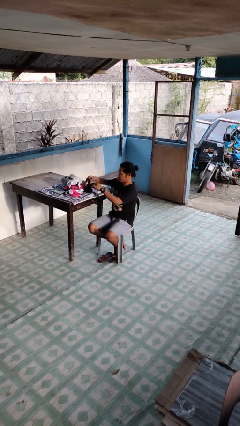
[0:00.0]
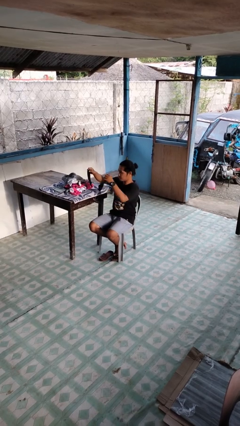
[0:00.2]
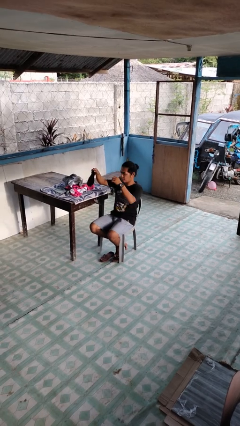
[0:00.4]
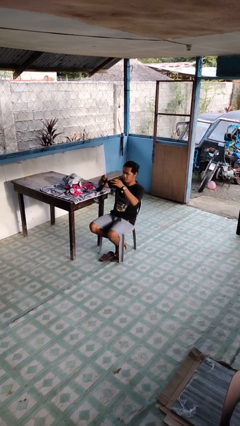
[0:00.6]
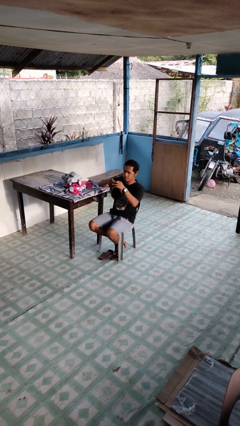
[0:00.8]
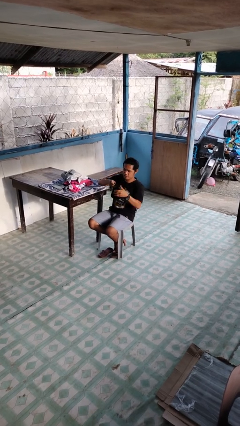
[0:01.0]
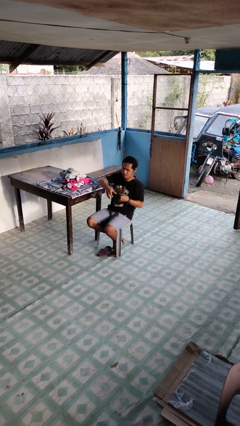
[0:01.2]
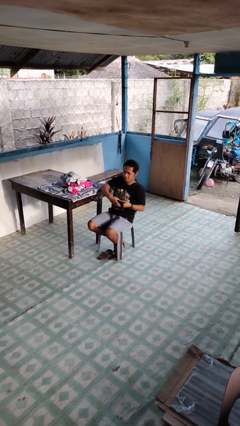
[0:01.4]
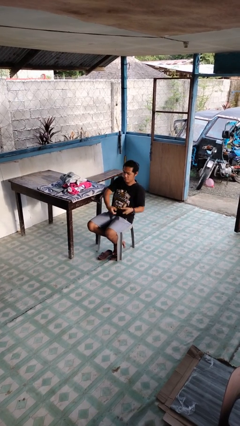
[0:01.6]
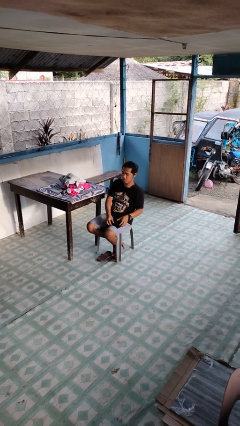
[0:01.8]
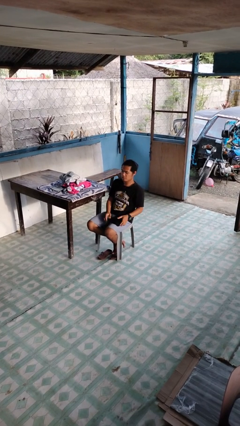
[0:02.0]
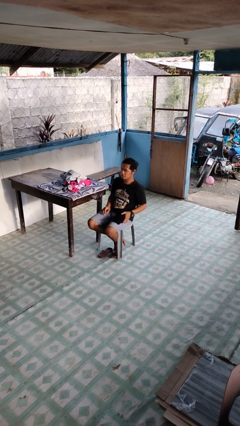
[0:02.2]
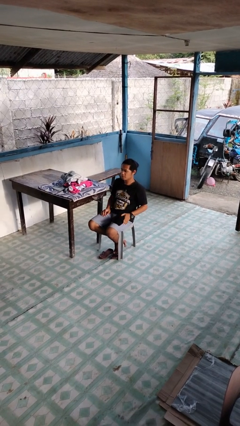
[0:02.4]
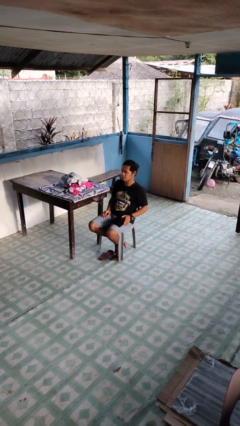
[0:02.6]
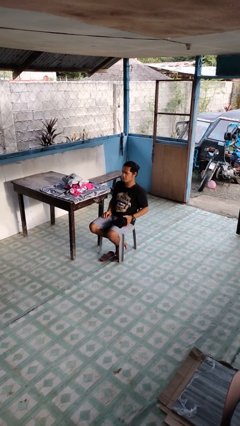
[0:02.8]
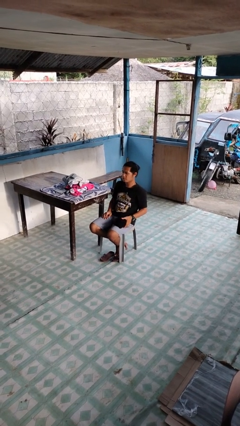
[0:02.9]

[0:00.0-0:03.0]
person folds socks

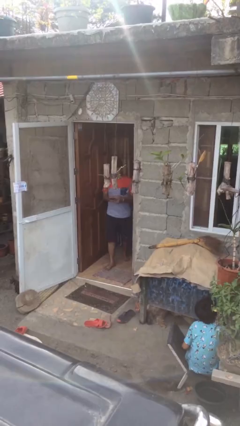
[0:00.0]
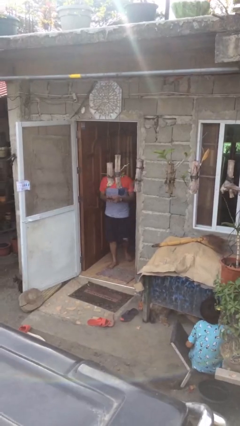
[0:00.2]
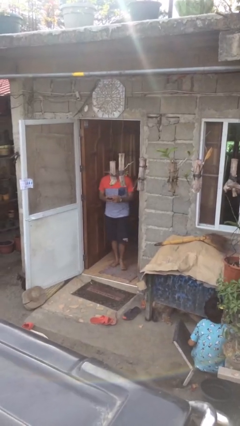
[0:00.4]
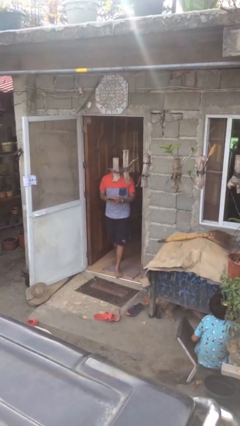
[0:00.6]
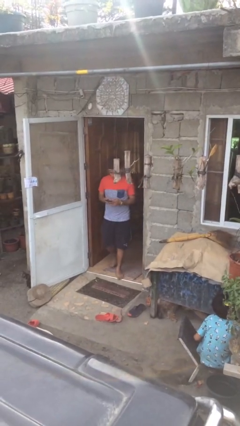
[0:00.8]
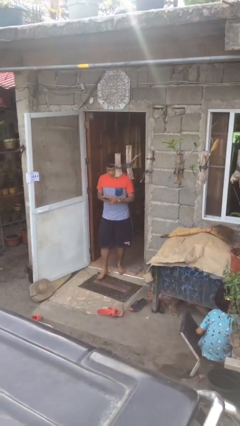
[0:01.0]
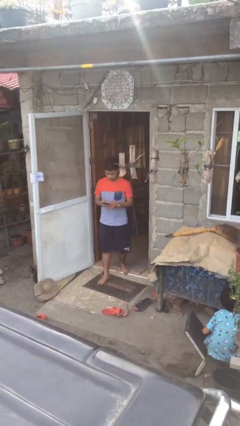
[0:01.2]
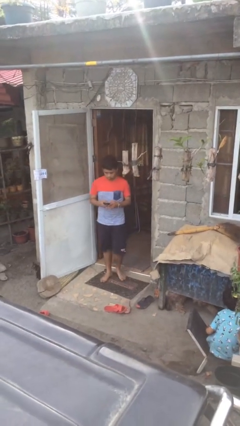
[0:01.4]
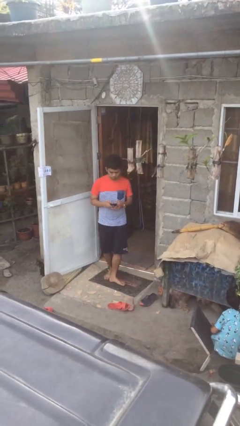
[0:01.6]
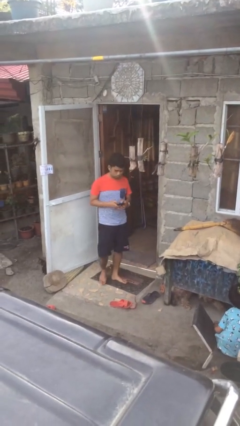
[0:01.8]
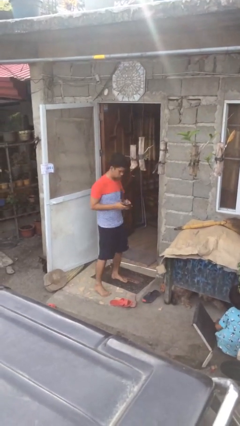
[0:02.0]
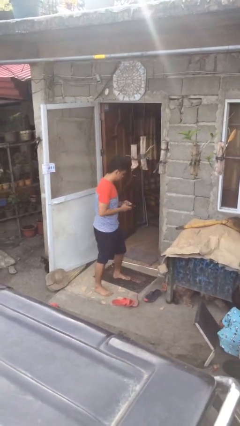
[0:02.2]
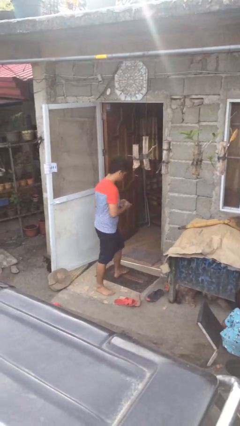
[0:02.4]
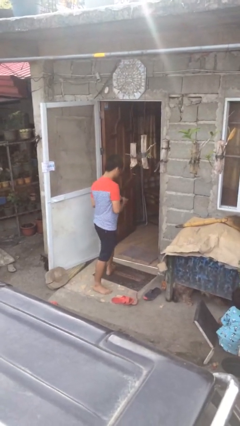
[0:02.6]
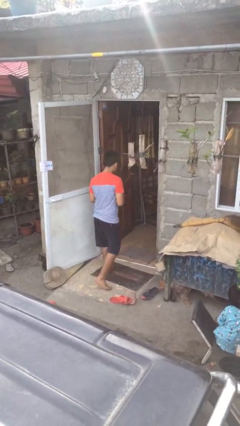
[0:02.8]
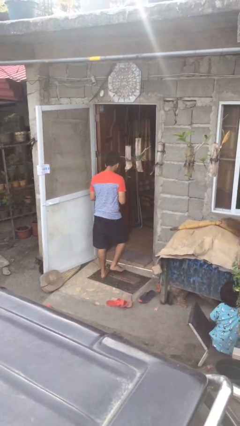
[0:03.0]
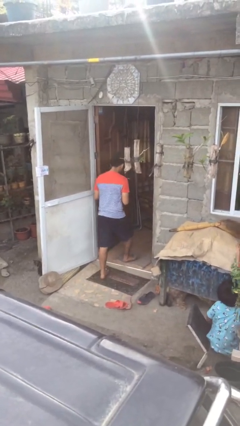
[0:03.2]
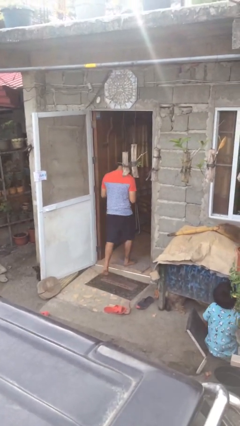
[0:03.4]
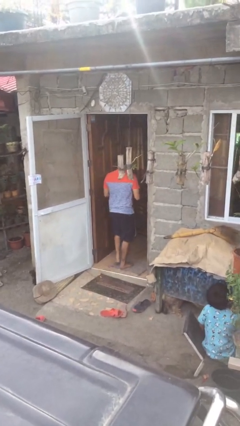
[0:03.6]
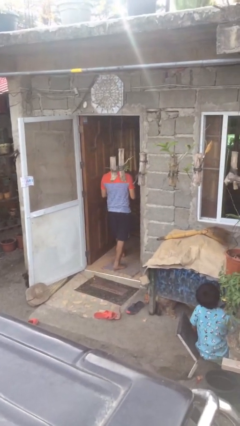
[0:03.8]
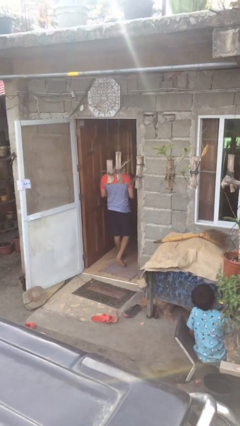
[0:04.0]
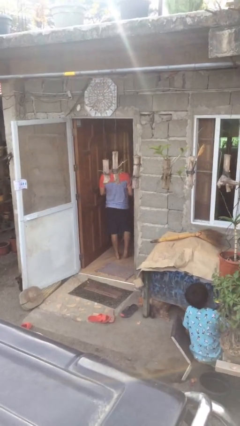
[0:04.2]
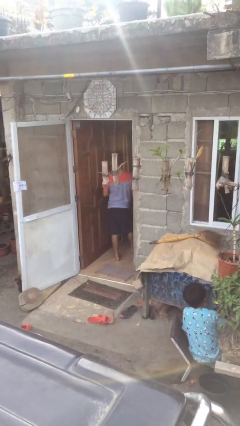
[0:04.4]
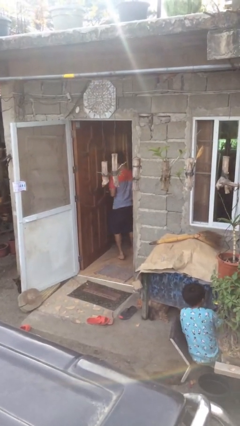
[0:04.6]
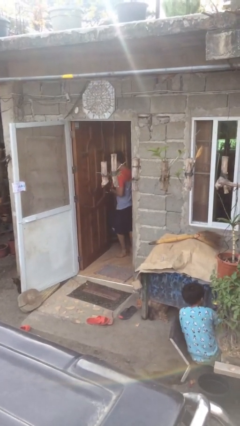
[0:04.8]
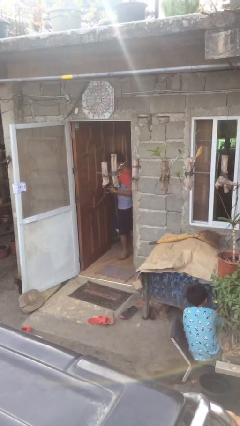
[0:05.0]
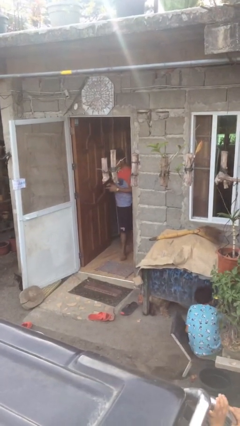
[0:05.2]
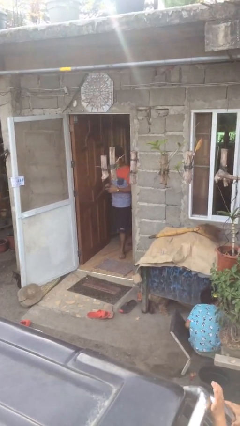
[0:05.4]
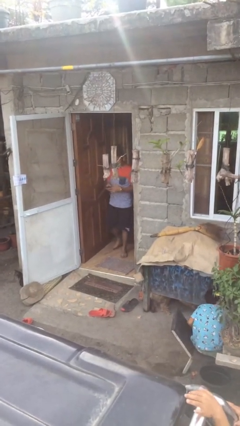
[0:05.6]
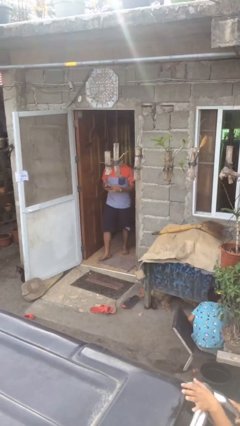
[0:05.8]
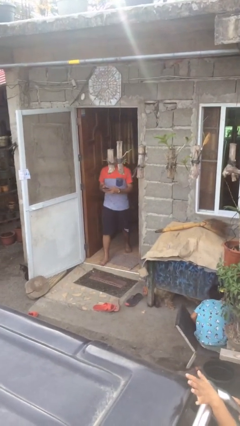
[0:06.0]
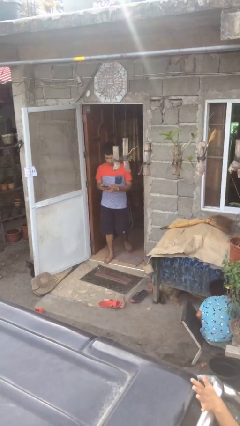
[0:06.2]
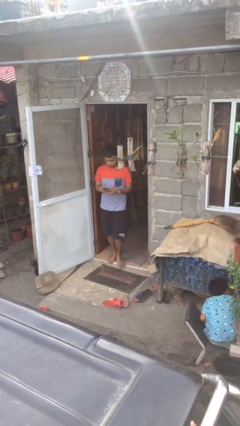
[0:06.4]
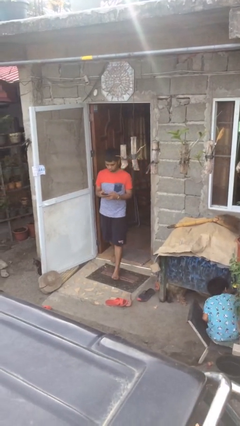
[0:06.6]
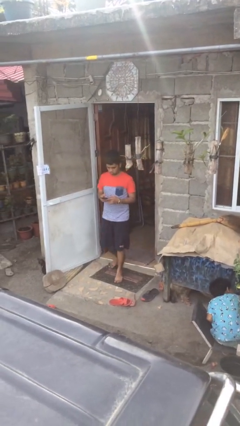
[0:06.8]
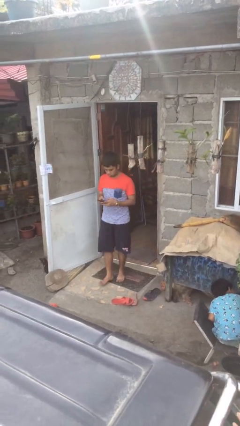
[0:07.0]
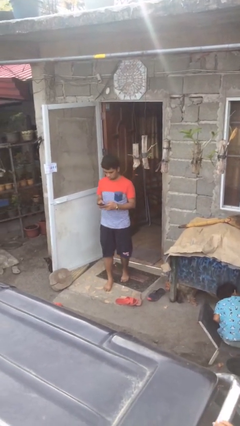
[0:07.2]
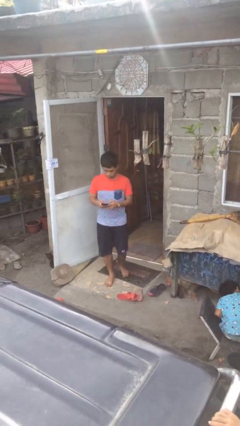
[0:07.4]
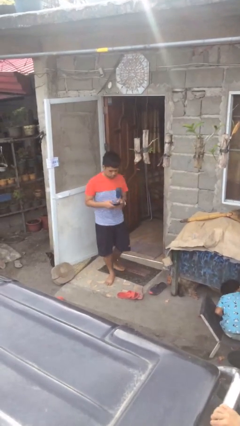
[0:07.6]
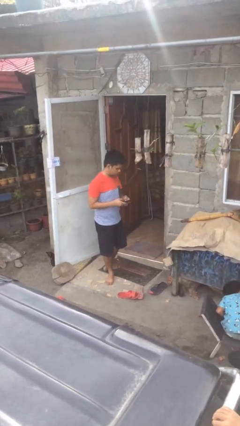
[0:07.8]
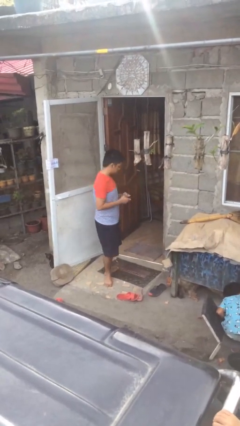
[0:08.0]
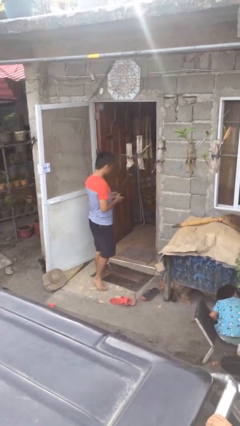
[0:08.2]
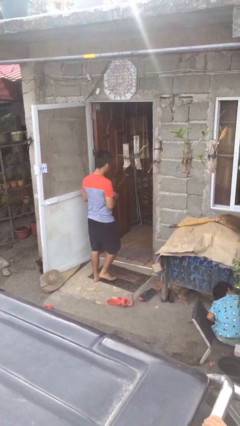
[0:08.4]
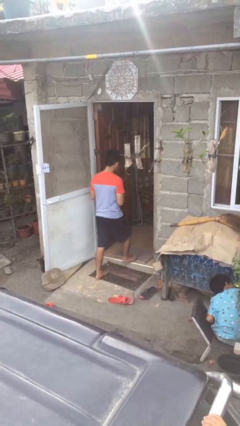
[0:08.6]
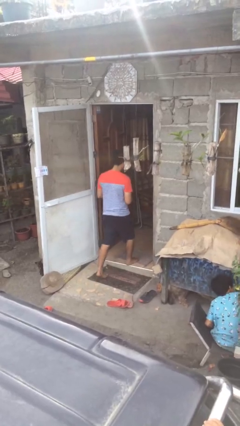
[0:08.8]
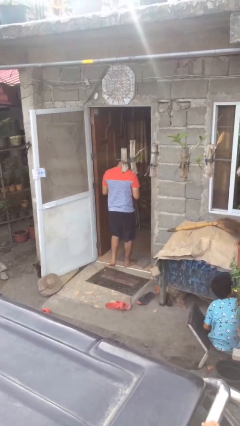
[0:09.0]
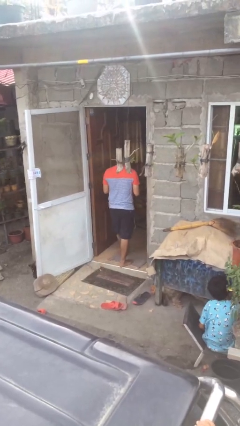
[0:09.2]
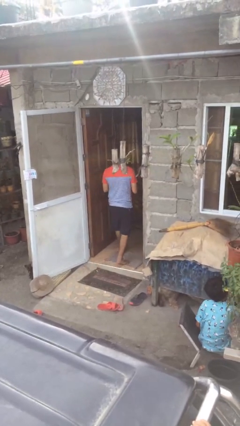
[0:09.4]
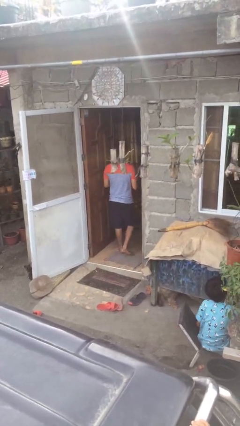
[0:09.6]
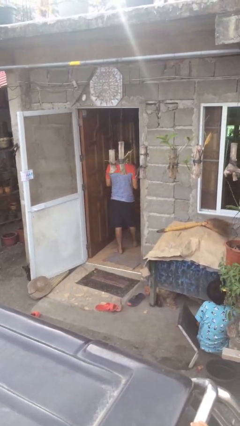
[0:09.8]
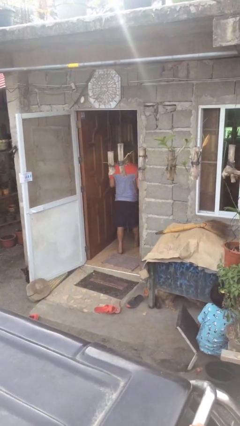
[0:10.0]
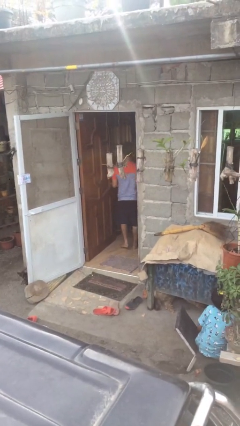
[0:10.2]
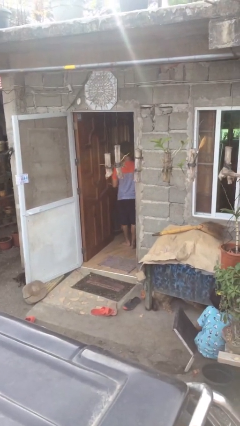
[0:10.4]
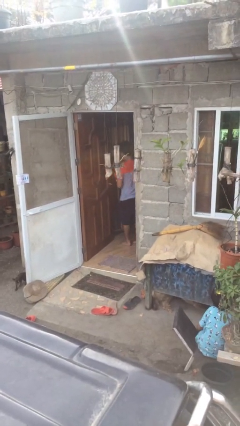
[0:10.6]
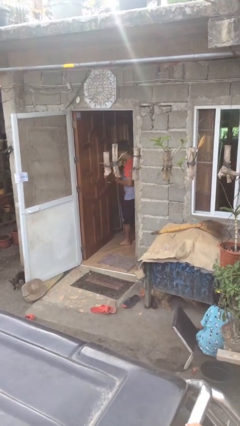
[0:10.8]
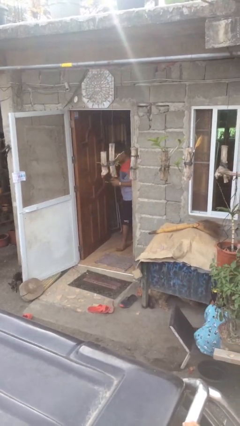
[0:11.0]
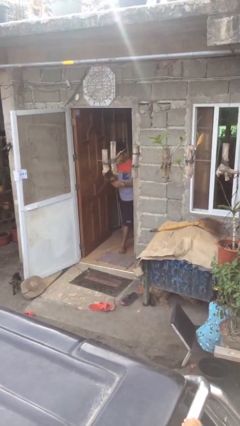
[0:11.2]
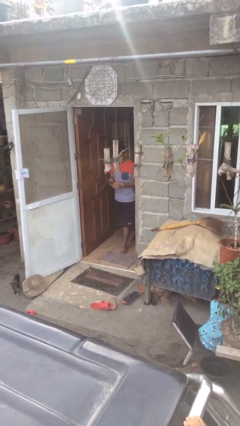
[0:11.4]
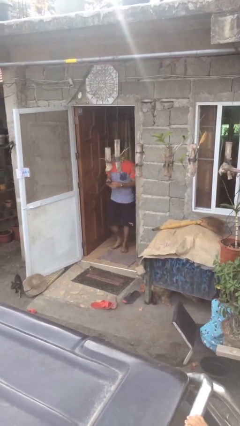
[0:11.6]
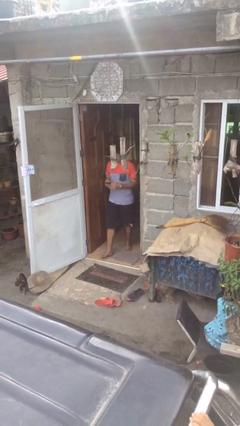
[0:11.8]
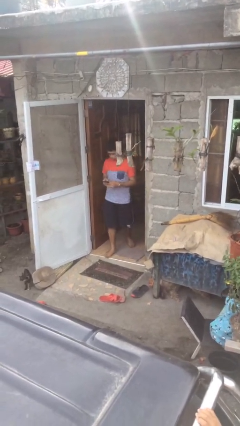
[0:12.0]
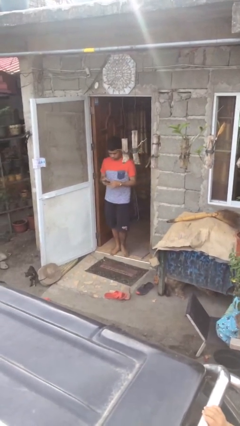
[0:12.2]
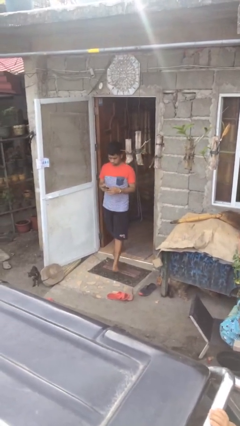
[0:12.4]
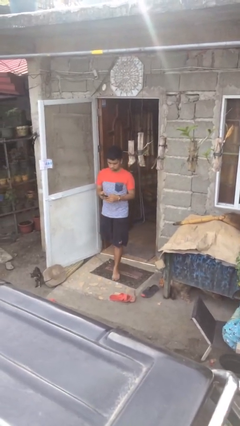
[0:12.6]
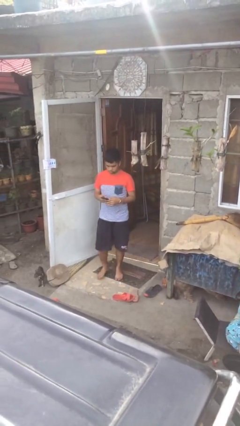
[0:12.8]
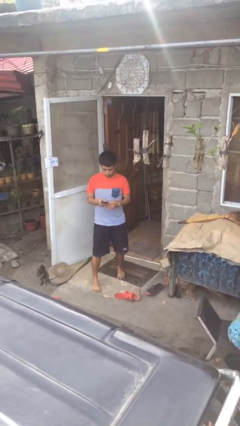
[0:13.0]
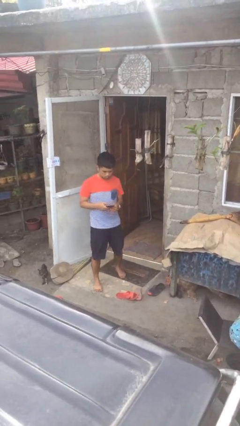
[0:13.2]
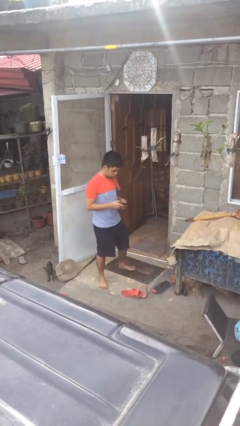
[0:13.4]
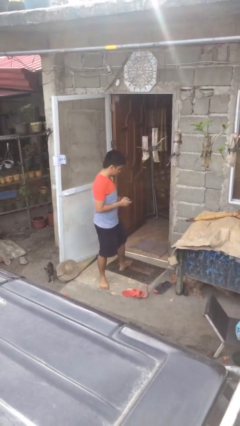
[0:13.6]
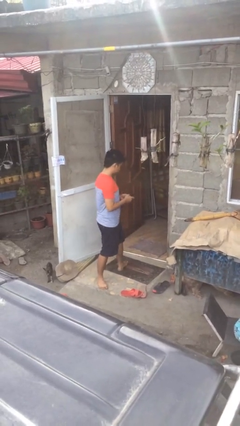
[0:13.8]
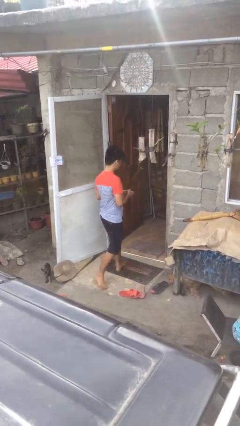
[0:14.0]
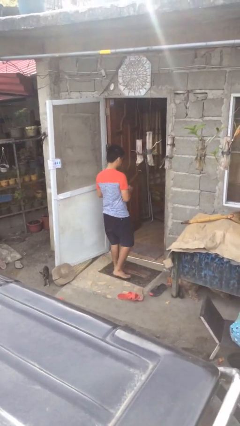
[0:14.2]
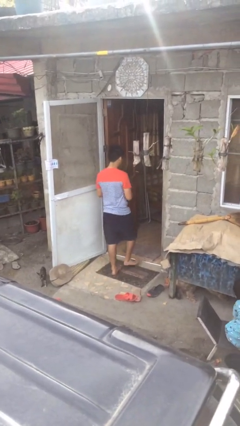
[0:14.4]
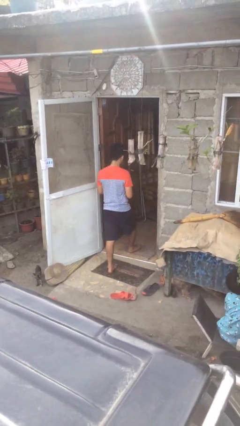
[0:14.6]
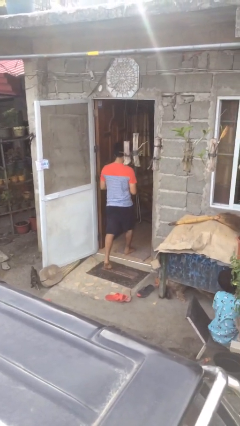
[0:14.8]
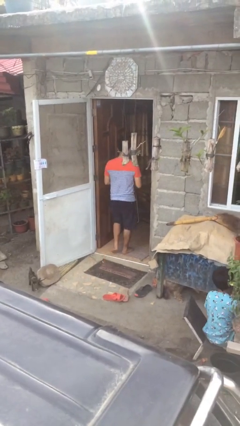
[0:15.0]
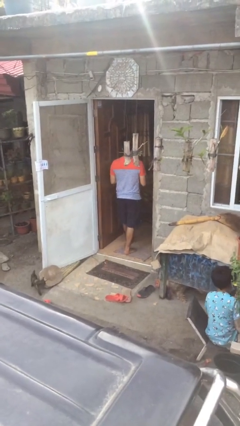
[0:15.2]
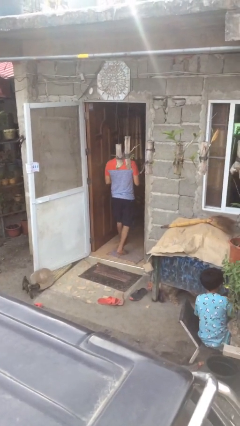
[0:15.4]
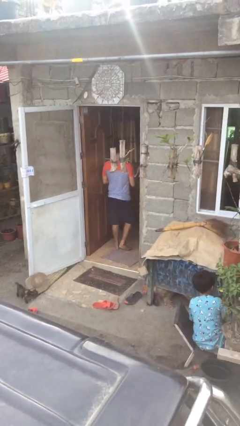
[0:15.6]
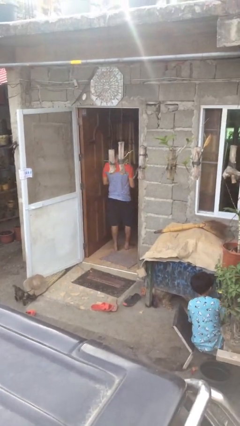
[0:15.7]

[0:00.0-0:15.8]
person texts on phone
